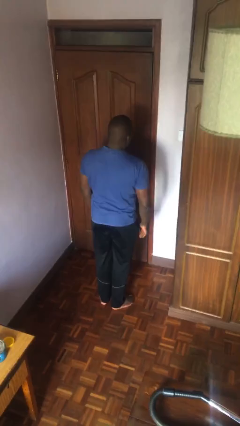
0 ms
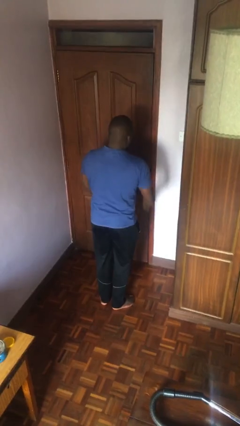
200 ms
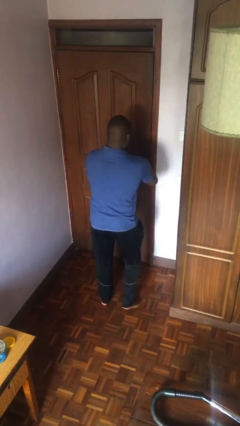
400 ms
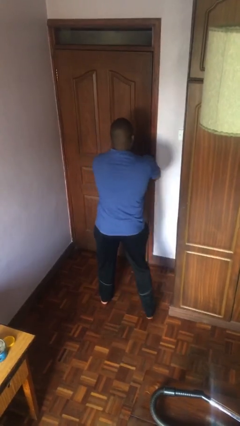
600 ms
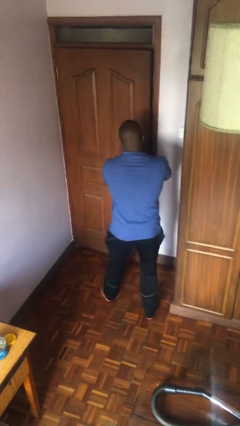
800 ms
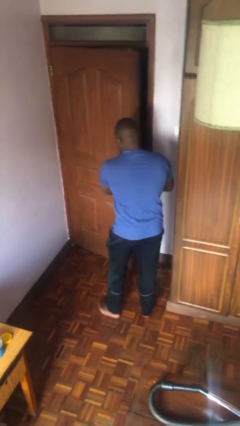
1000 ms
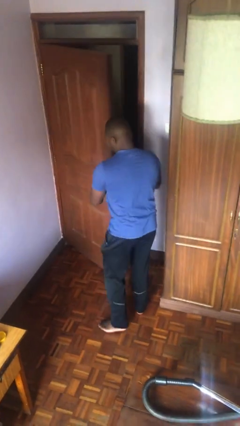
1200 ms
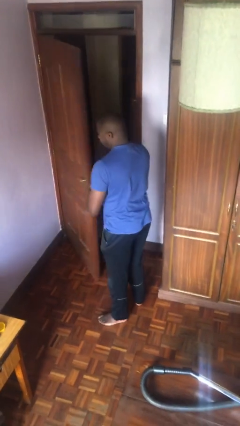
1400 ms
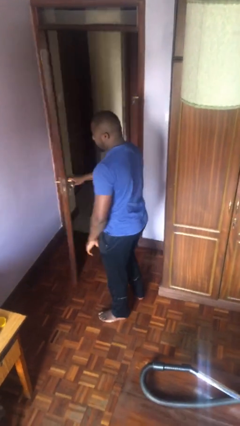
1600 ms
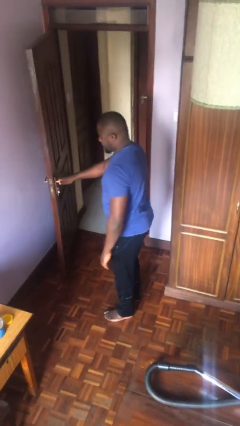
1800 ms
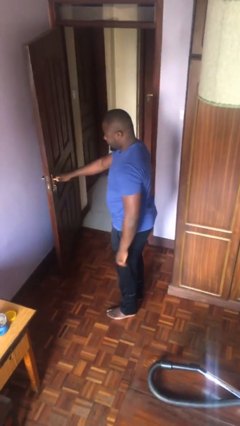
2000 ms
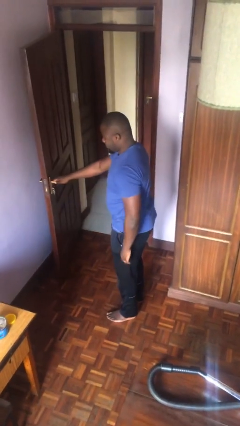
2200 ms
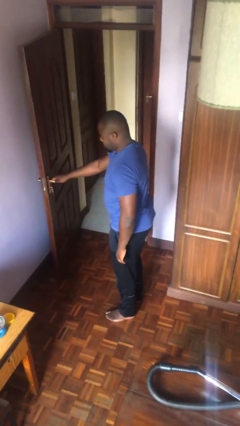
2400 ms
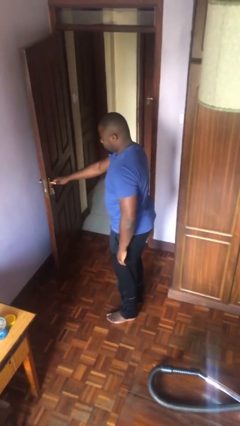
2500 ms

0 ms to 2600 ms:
person opens facility door

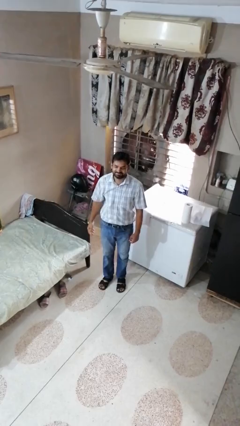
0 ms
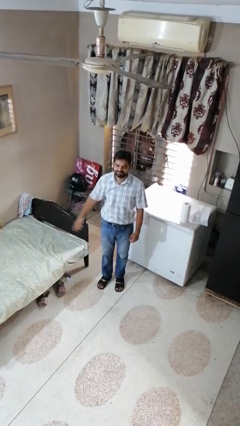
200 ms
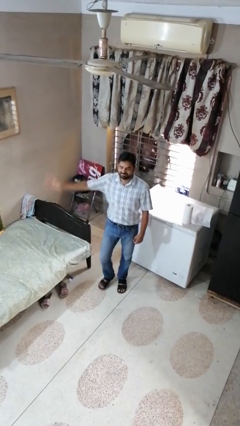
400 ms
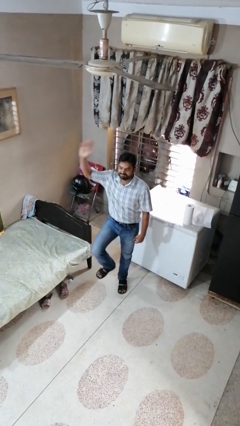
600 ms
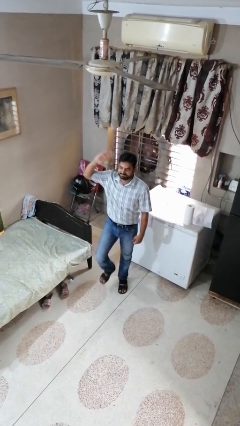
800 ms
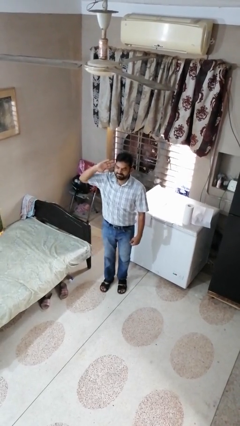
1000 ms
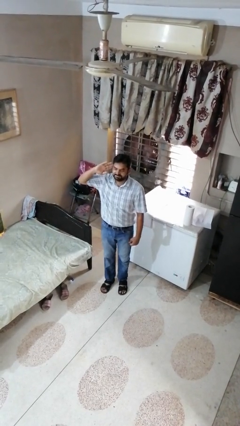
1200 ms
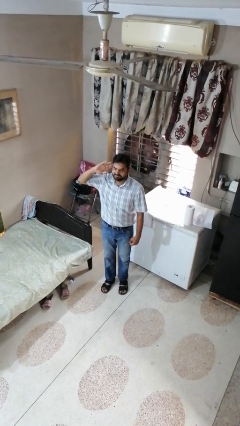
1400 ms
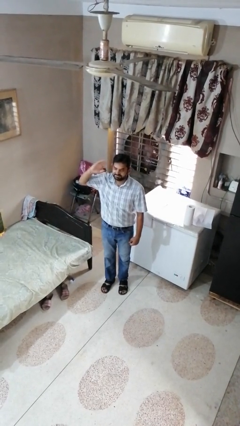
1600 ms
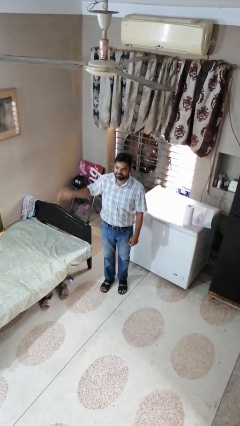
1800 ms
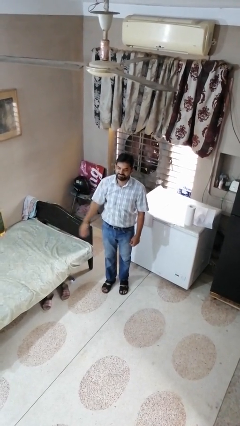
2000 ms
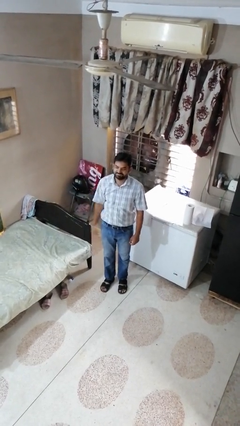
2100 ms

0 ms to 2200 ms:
person salutes

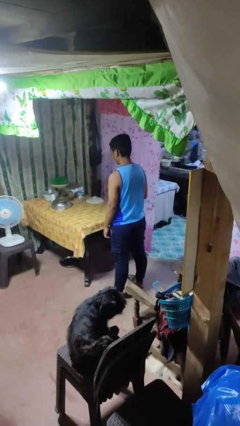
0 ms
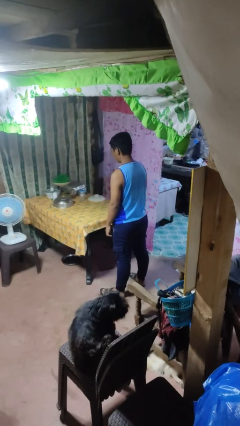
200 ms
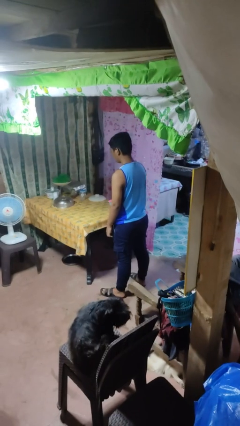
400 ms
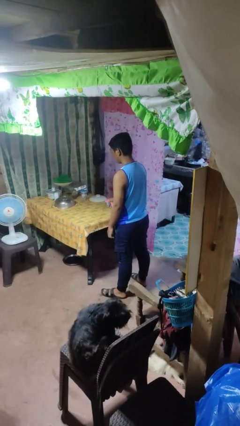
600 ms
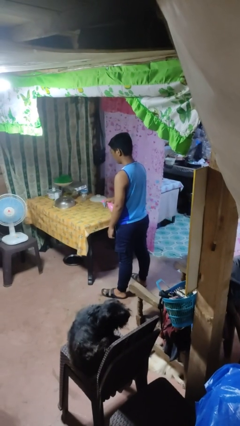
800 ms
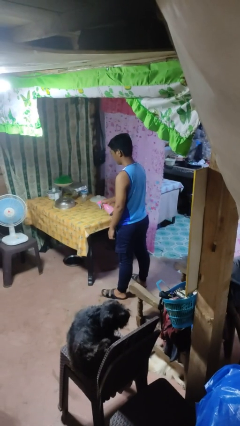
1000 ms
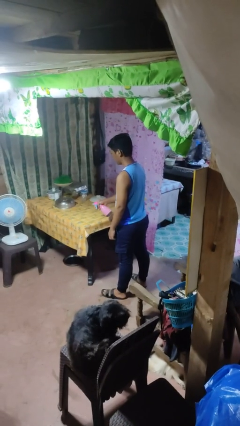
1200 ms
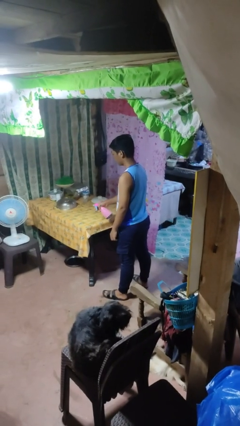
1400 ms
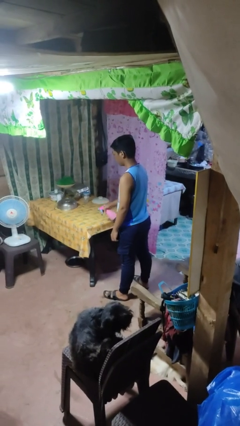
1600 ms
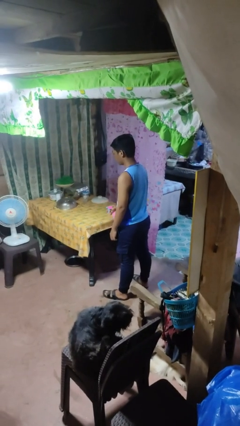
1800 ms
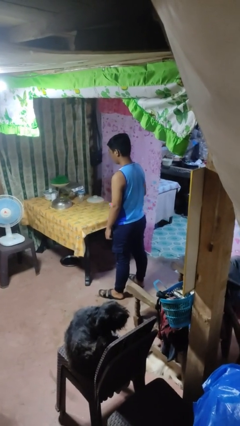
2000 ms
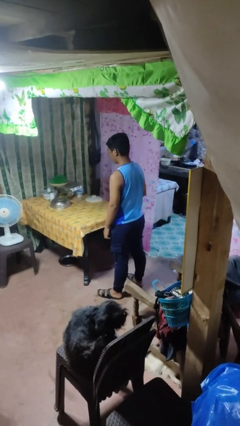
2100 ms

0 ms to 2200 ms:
person sprays from bottle

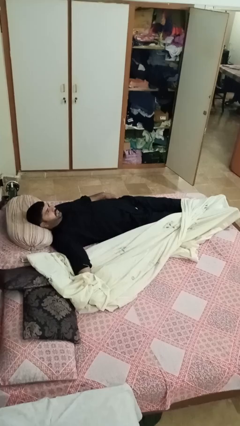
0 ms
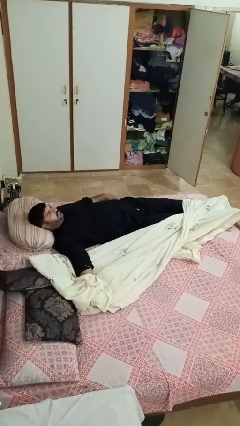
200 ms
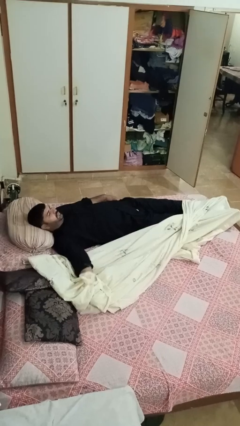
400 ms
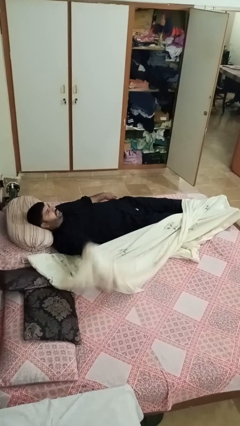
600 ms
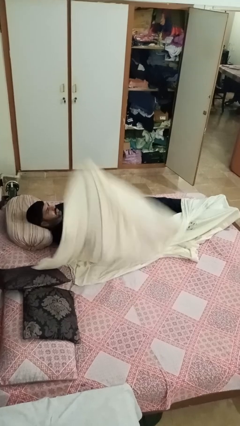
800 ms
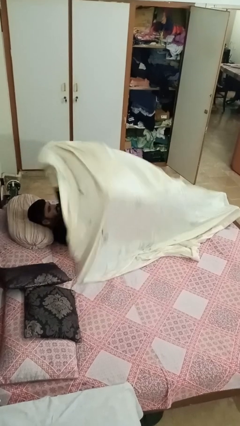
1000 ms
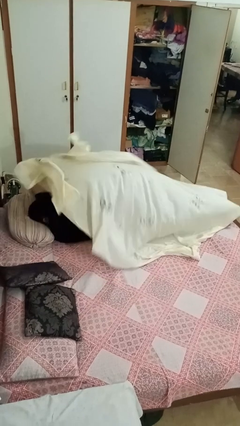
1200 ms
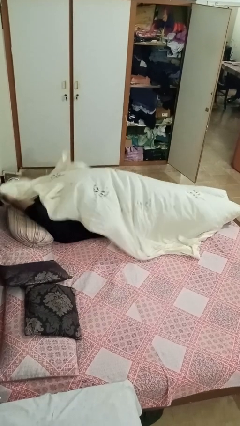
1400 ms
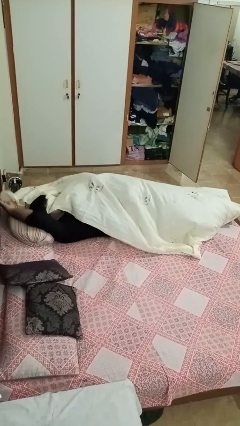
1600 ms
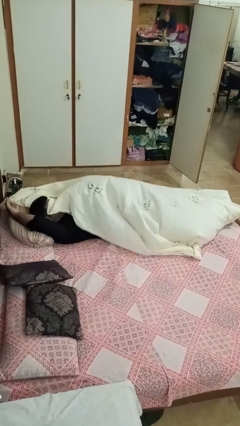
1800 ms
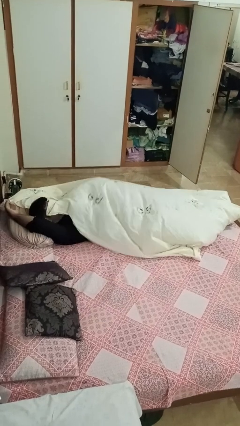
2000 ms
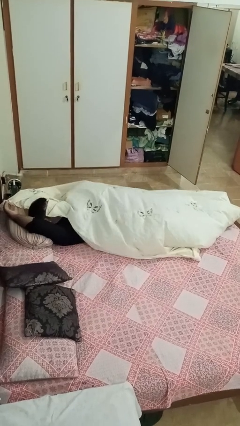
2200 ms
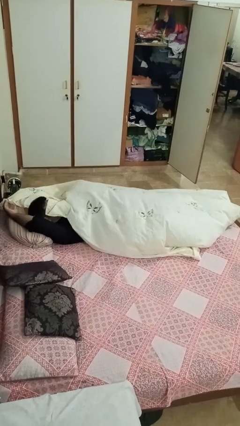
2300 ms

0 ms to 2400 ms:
person covers with bedsheets

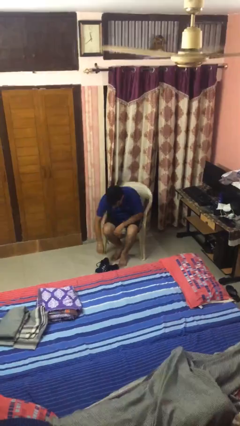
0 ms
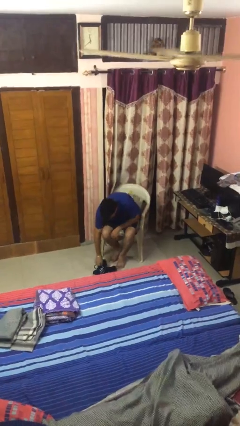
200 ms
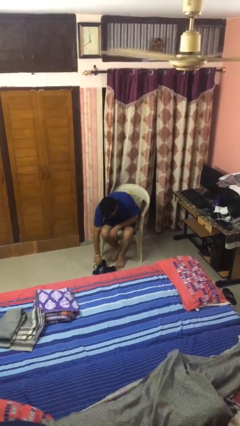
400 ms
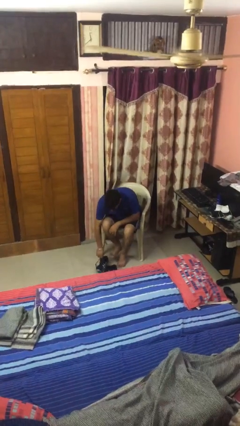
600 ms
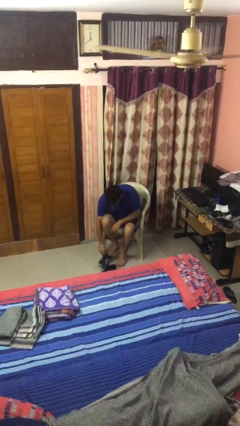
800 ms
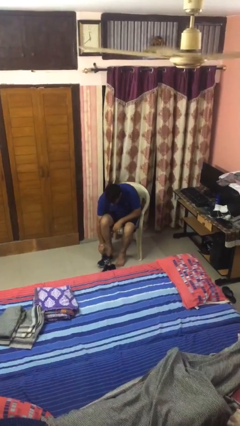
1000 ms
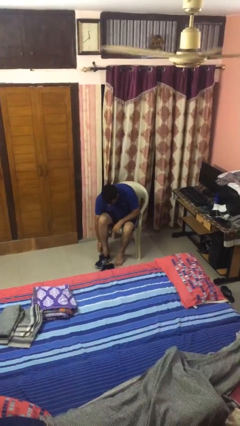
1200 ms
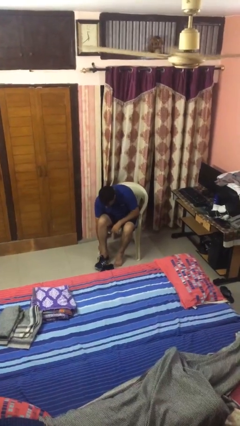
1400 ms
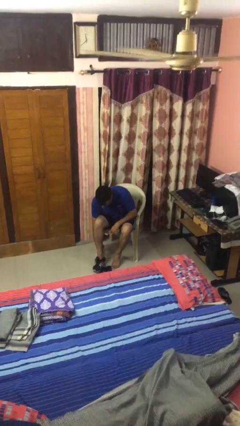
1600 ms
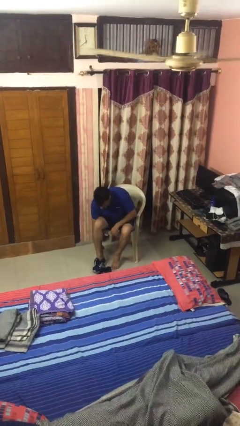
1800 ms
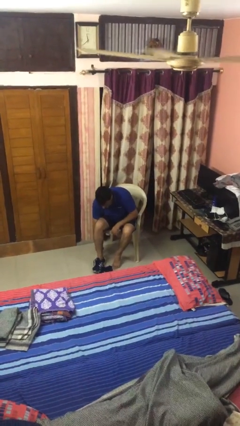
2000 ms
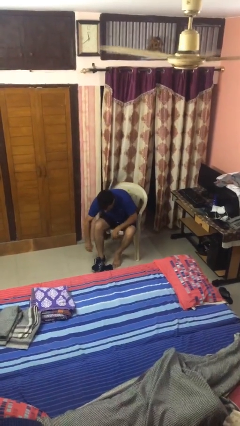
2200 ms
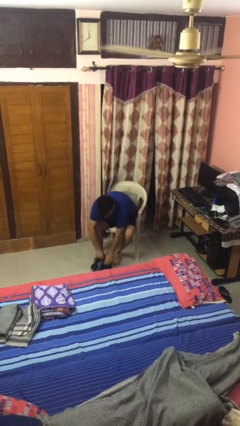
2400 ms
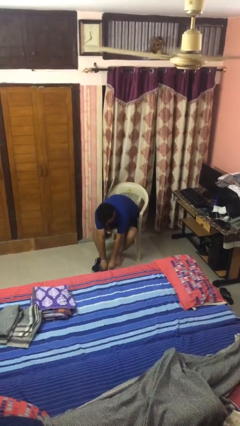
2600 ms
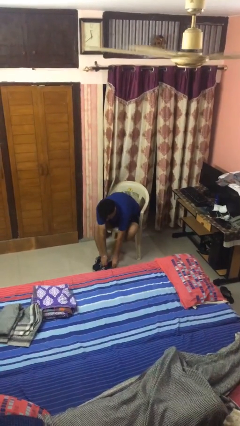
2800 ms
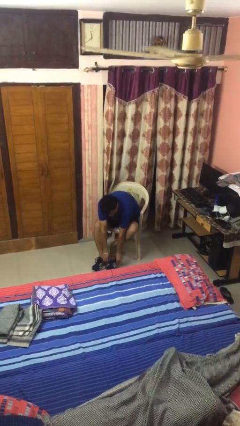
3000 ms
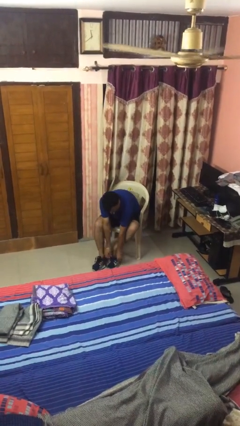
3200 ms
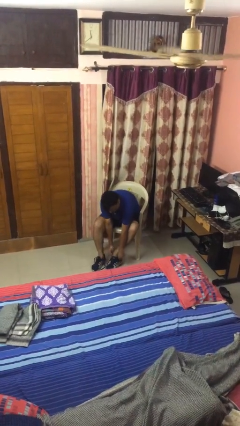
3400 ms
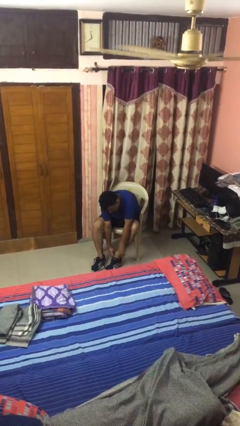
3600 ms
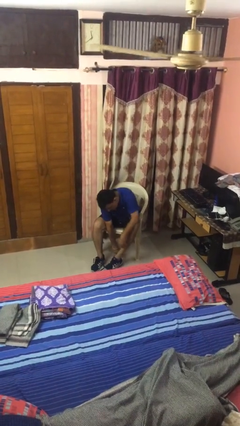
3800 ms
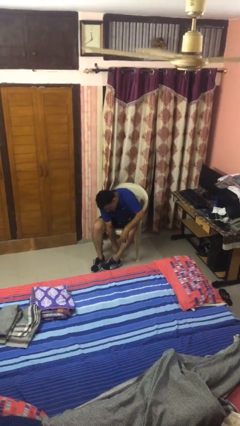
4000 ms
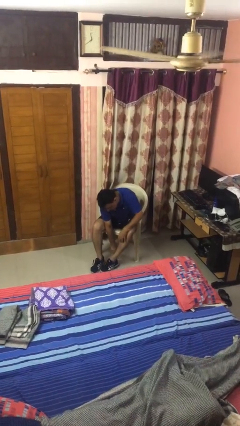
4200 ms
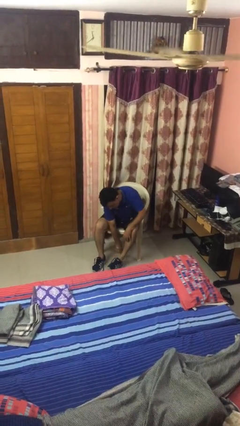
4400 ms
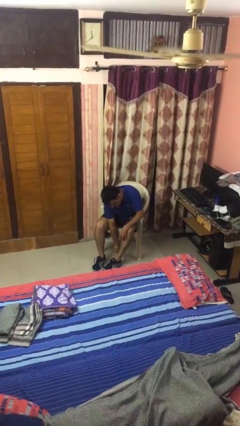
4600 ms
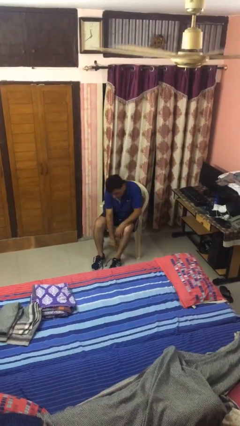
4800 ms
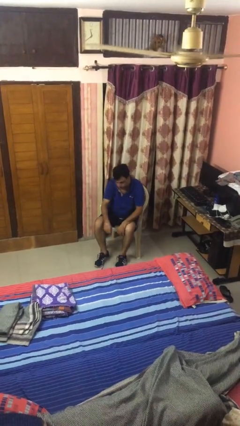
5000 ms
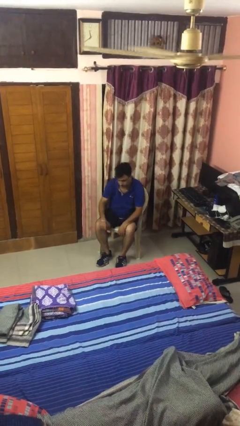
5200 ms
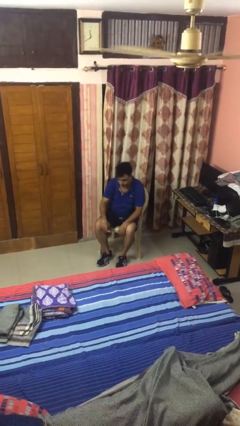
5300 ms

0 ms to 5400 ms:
person puts on boots

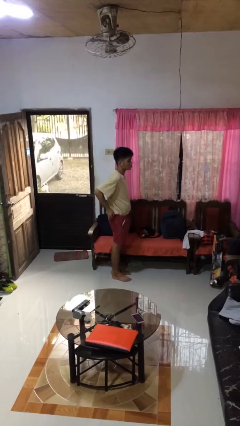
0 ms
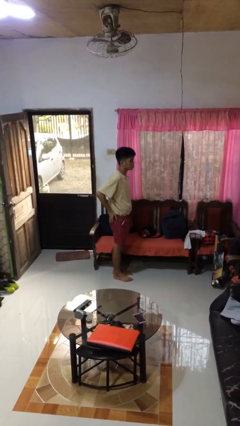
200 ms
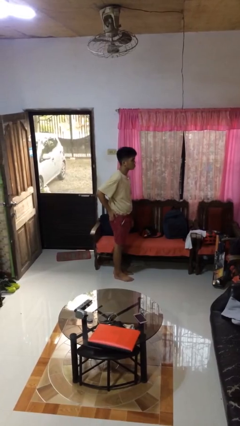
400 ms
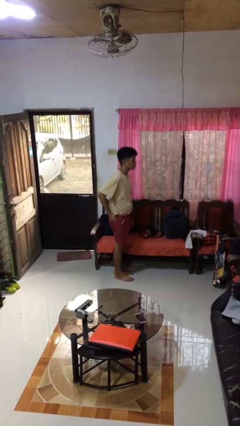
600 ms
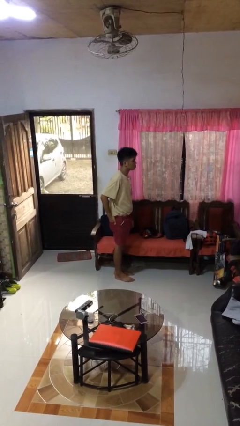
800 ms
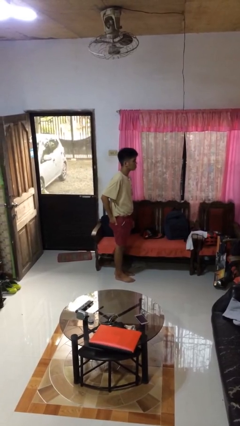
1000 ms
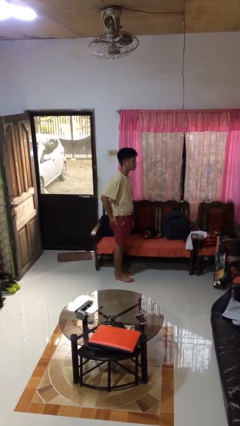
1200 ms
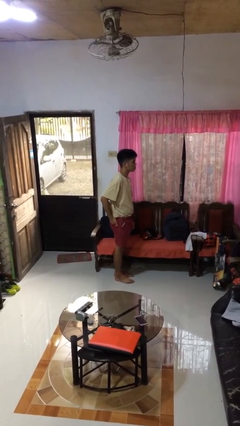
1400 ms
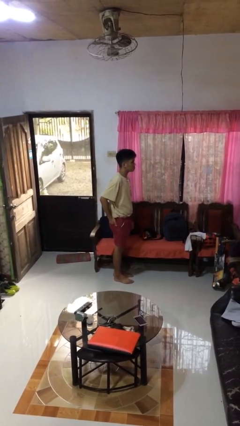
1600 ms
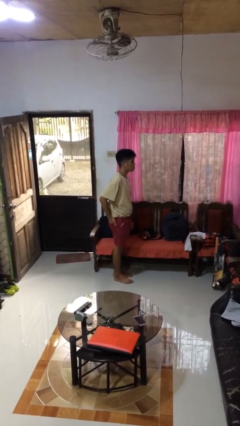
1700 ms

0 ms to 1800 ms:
person puts hands in back pockets

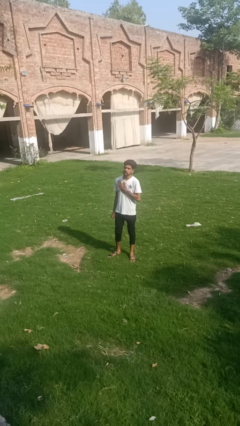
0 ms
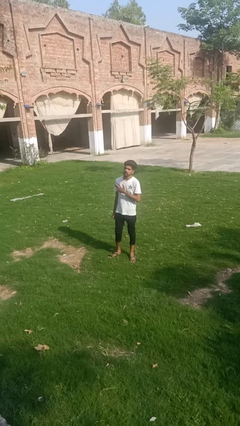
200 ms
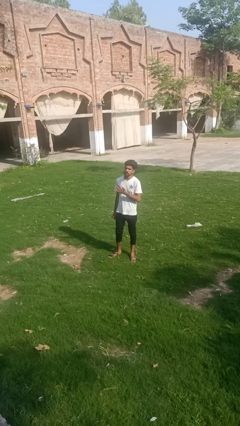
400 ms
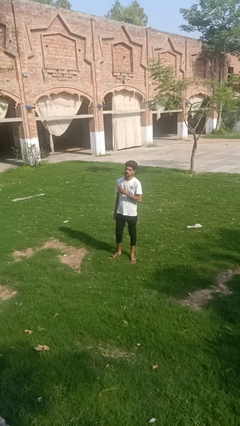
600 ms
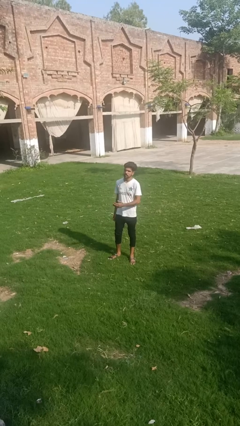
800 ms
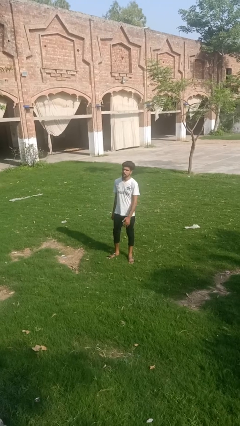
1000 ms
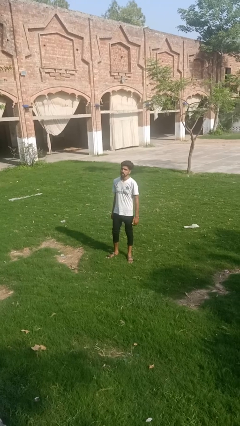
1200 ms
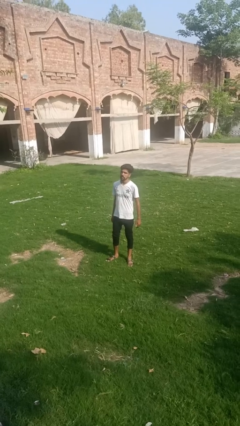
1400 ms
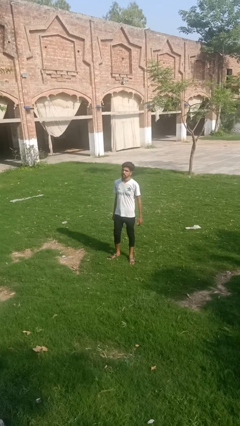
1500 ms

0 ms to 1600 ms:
person drums on chest
